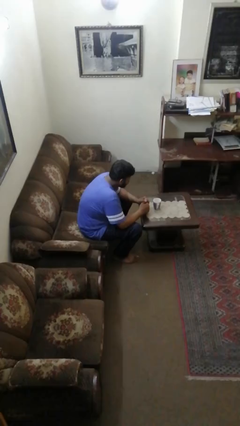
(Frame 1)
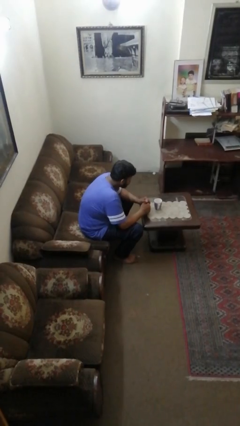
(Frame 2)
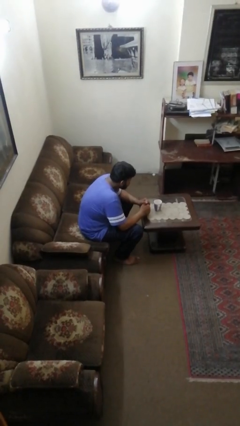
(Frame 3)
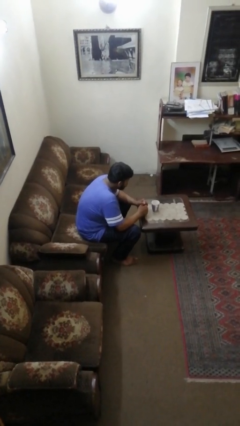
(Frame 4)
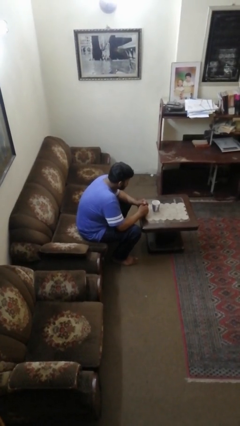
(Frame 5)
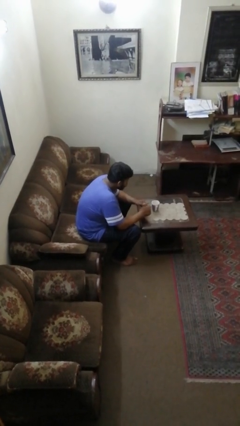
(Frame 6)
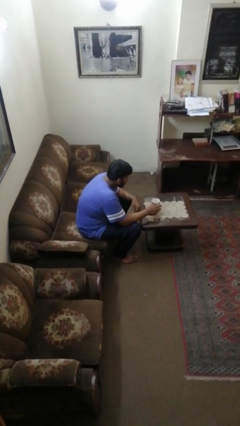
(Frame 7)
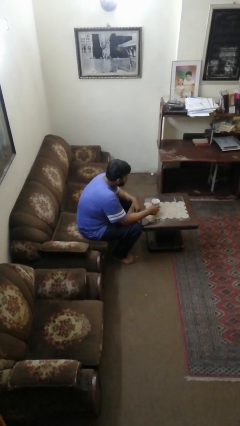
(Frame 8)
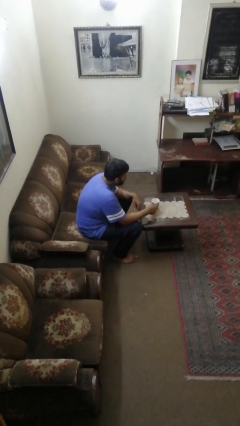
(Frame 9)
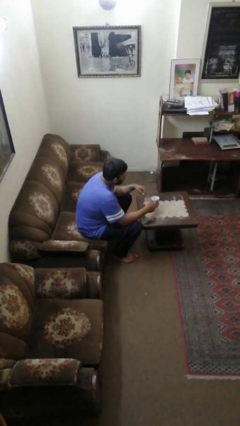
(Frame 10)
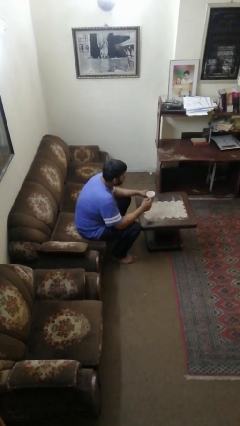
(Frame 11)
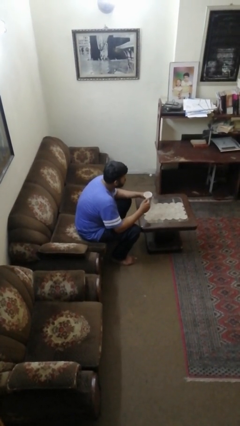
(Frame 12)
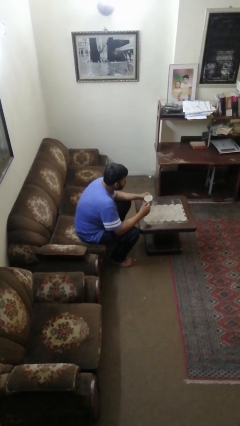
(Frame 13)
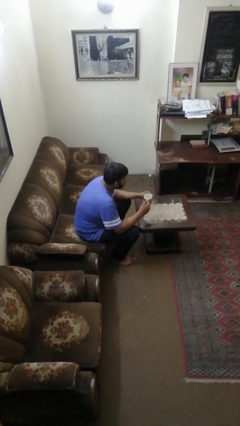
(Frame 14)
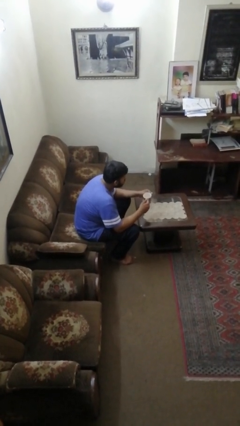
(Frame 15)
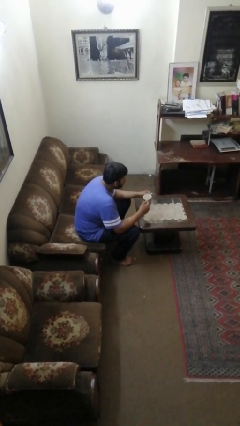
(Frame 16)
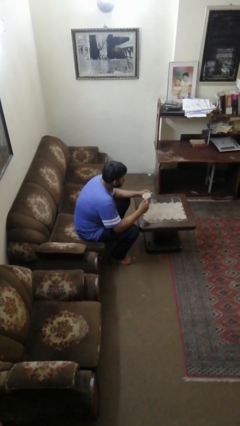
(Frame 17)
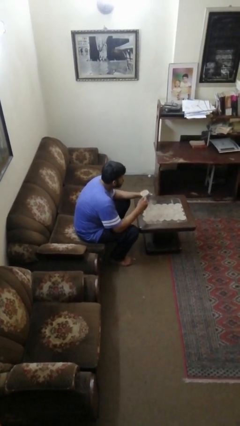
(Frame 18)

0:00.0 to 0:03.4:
person picks up object from table

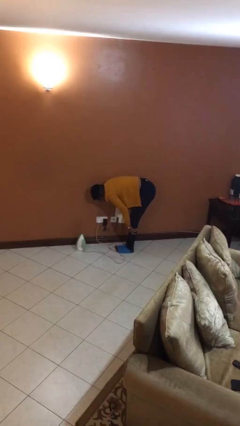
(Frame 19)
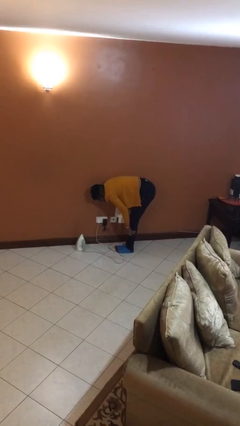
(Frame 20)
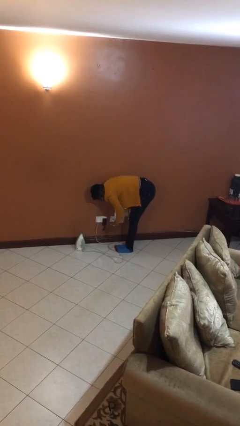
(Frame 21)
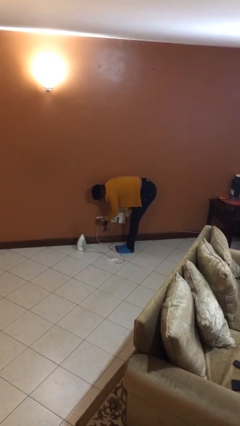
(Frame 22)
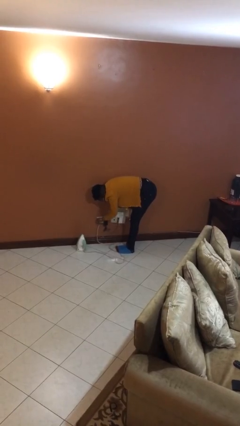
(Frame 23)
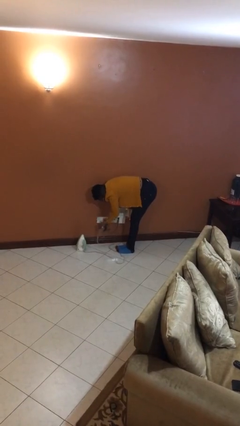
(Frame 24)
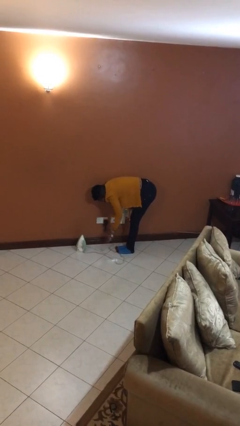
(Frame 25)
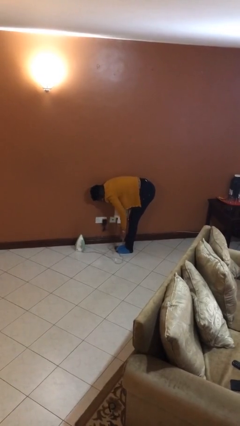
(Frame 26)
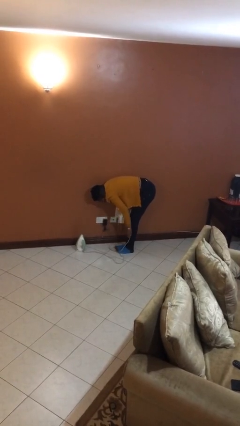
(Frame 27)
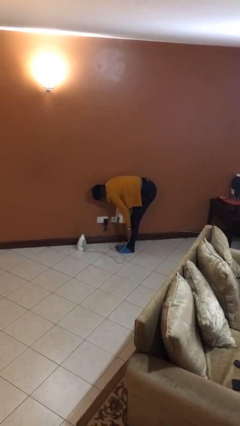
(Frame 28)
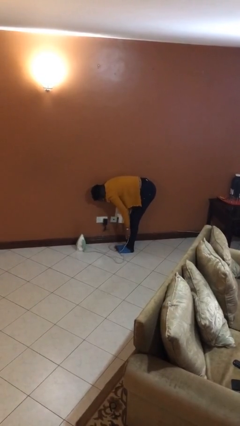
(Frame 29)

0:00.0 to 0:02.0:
person unplugs from electrical socket

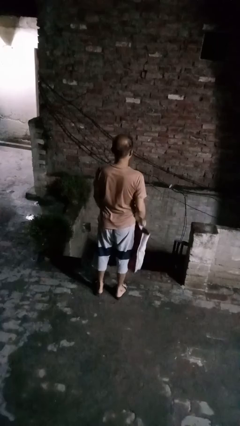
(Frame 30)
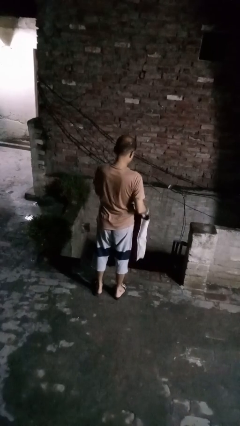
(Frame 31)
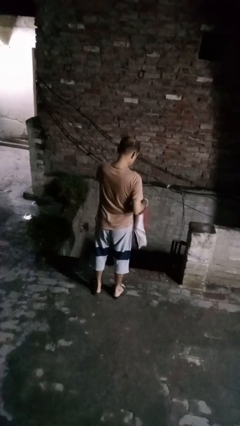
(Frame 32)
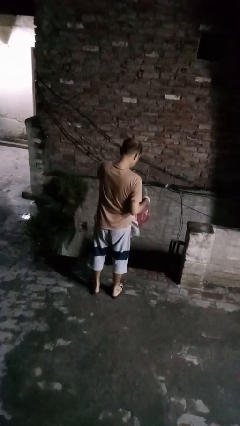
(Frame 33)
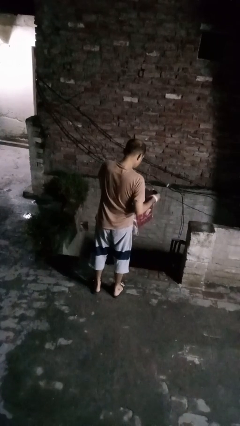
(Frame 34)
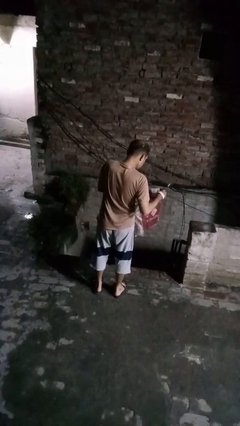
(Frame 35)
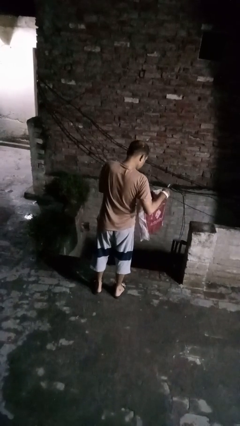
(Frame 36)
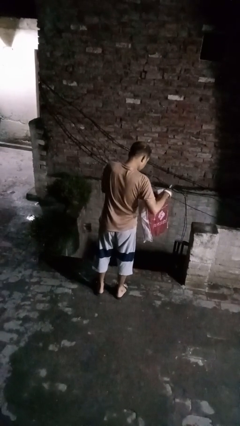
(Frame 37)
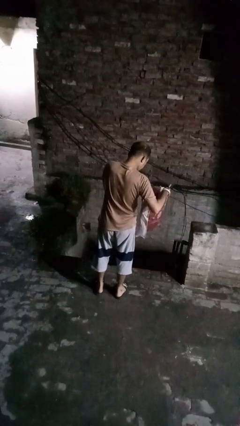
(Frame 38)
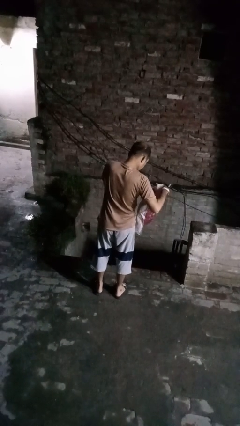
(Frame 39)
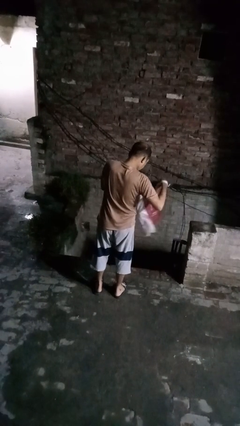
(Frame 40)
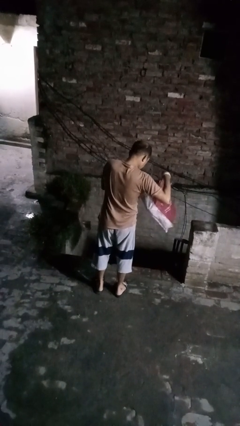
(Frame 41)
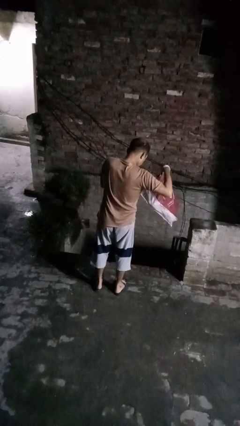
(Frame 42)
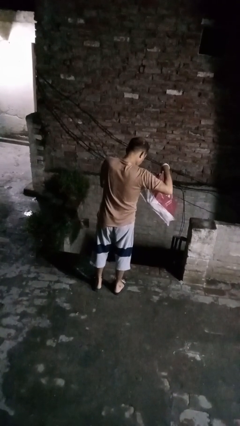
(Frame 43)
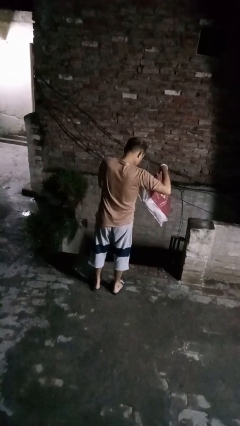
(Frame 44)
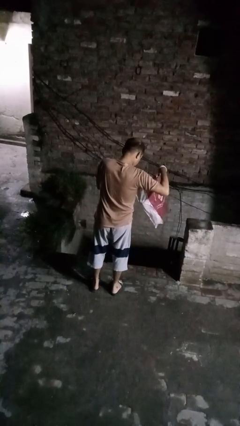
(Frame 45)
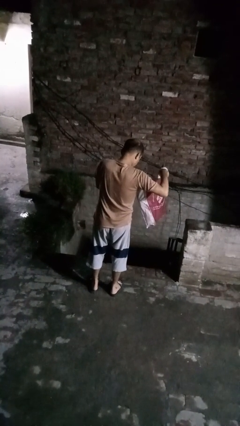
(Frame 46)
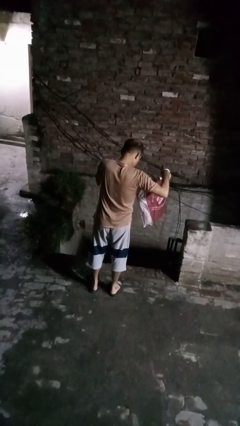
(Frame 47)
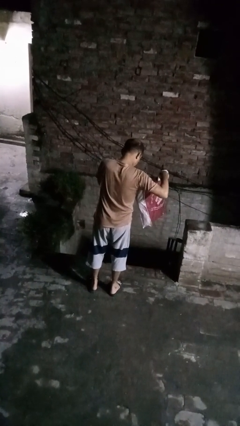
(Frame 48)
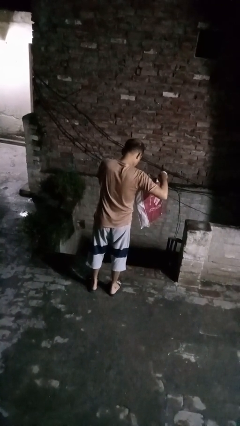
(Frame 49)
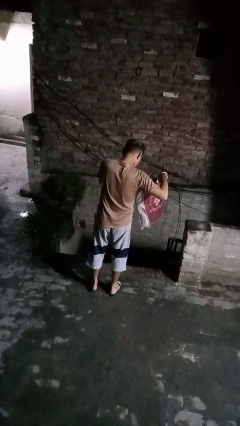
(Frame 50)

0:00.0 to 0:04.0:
person searches in bag

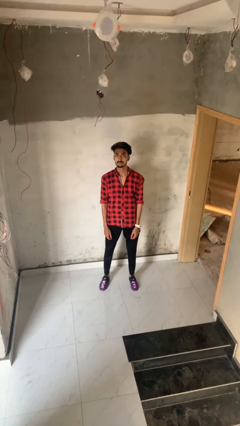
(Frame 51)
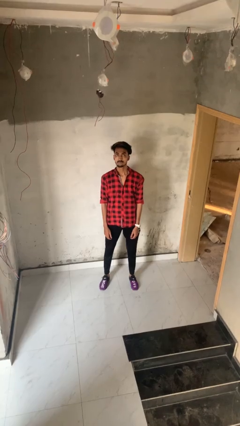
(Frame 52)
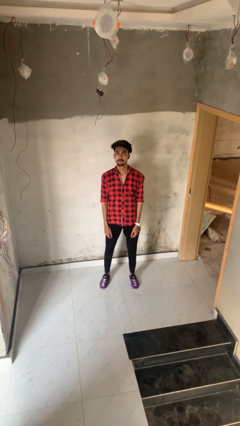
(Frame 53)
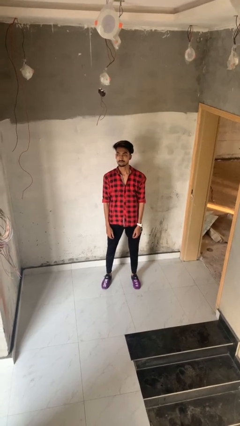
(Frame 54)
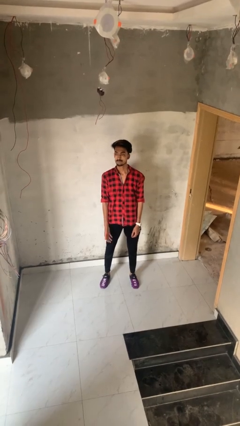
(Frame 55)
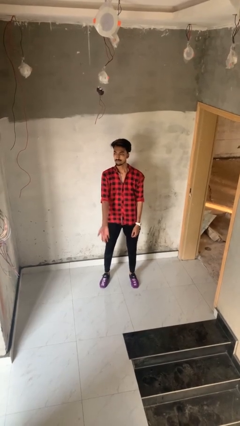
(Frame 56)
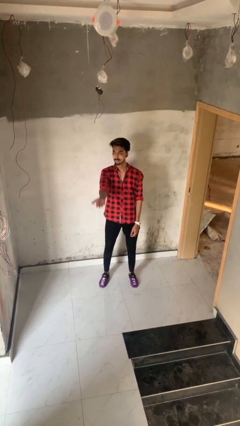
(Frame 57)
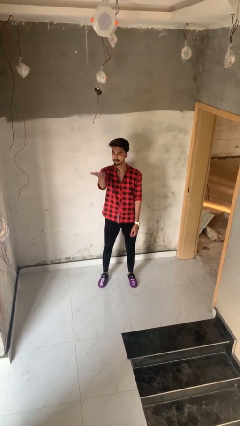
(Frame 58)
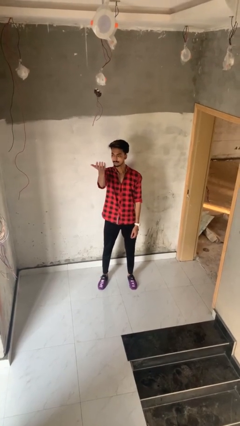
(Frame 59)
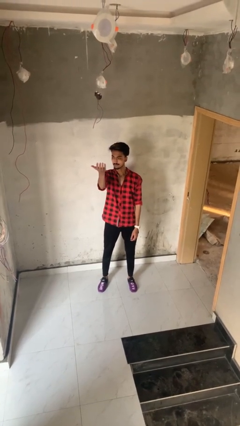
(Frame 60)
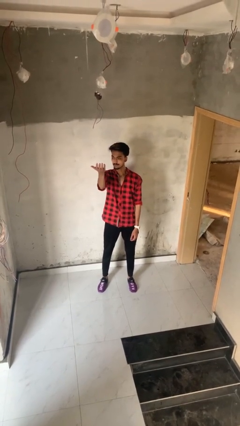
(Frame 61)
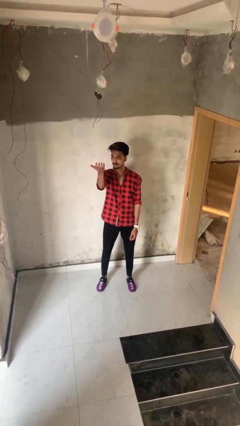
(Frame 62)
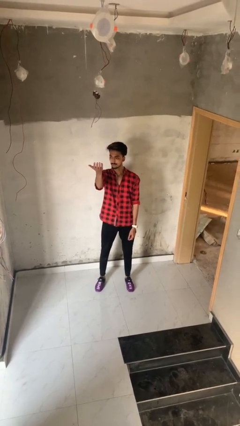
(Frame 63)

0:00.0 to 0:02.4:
person gestures swipe up

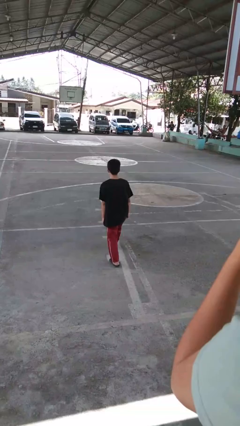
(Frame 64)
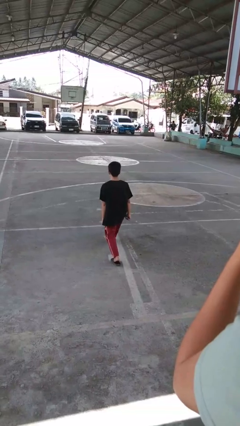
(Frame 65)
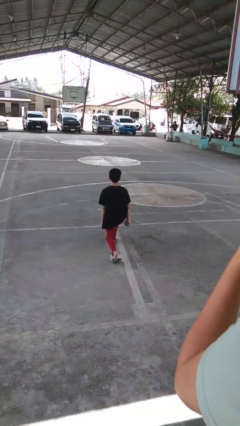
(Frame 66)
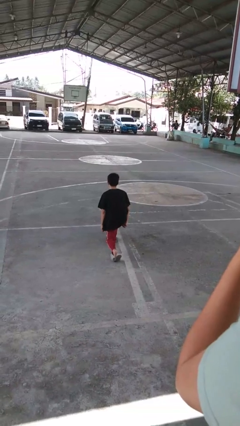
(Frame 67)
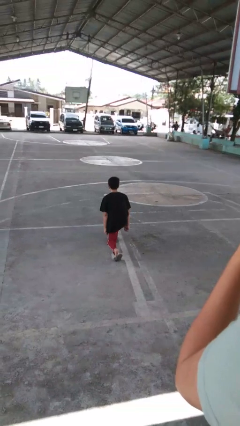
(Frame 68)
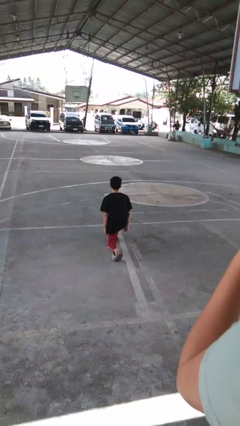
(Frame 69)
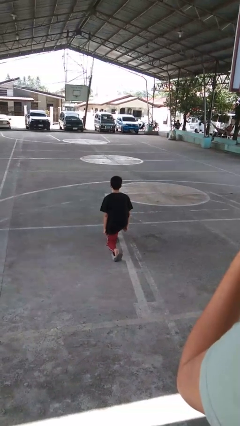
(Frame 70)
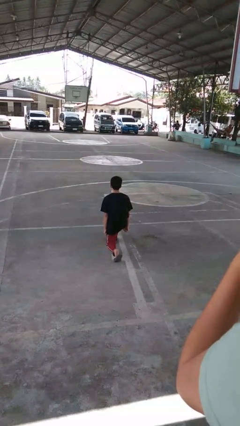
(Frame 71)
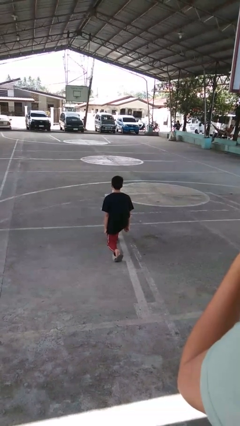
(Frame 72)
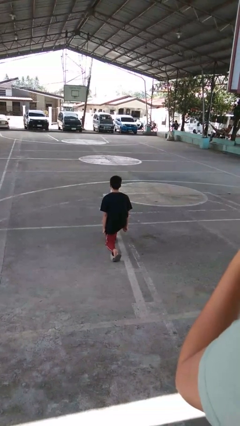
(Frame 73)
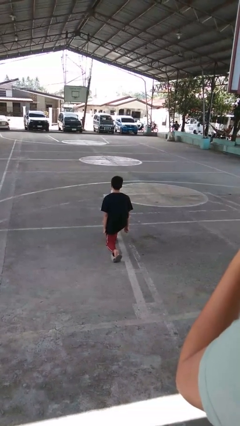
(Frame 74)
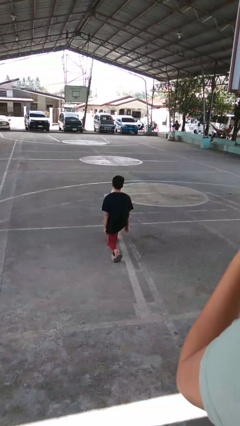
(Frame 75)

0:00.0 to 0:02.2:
person exercises with lunges

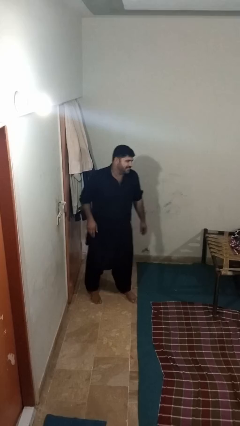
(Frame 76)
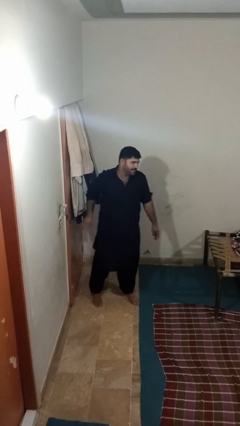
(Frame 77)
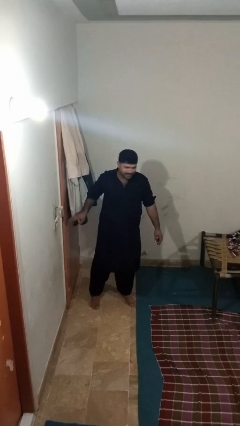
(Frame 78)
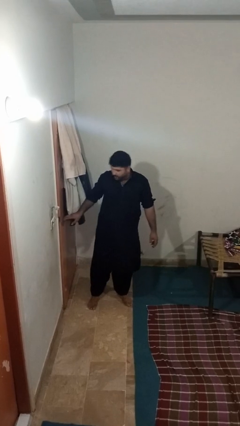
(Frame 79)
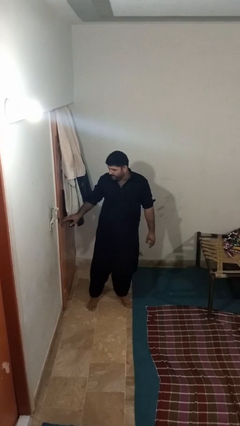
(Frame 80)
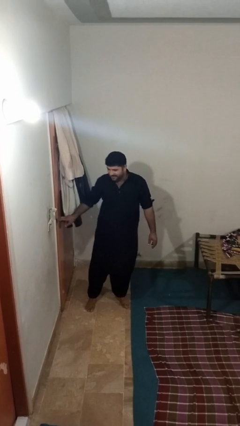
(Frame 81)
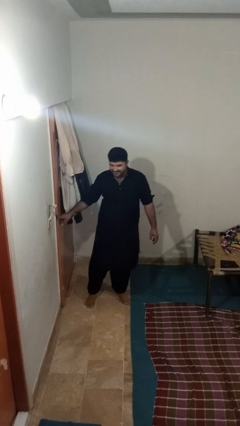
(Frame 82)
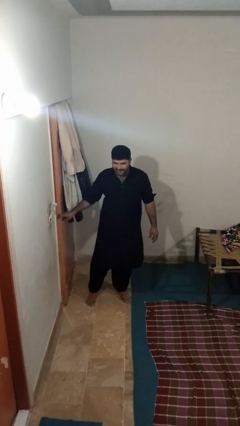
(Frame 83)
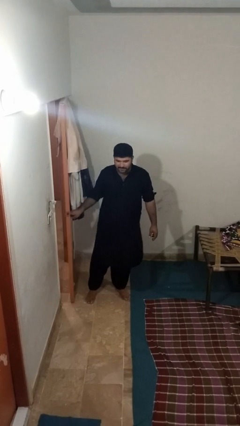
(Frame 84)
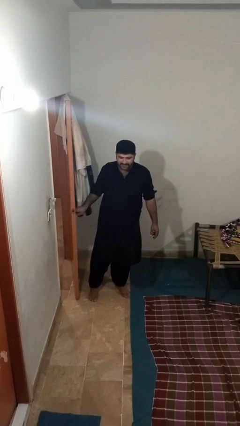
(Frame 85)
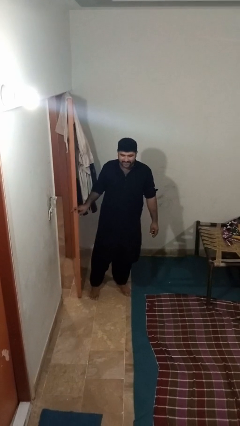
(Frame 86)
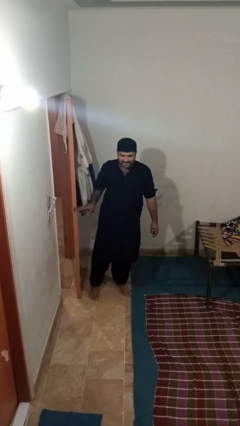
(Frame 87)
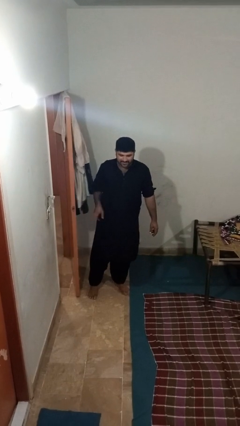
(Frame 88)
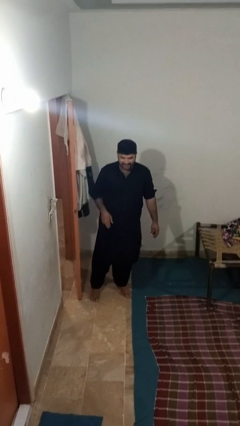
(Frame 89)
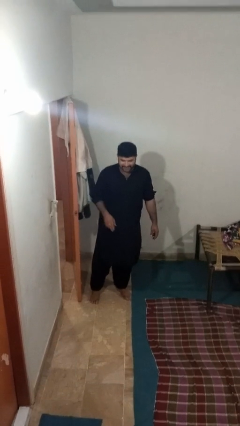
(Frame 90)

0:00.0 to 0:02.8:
person opens facility door

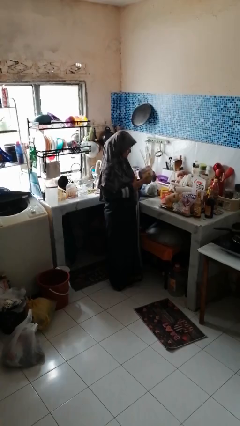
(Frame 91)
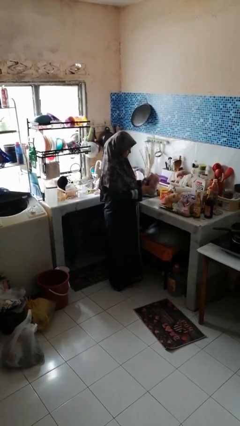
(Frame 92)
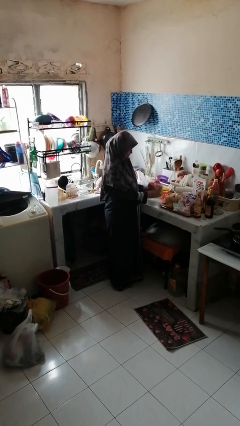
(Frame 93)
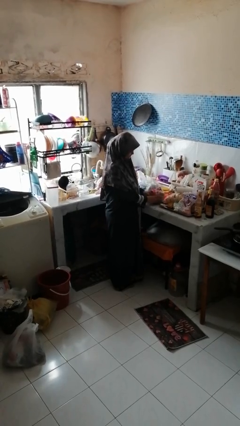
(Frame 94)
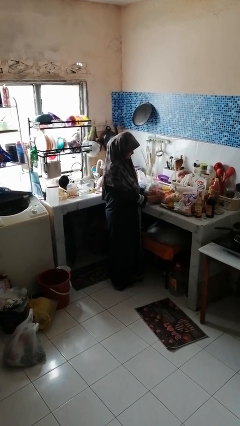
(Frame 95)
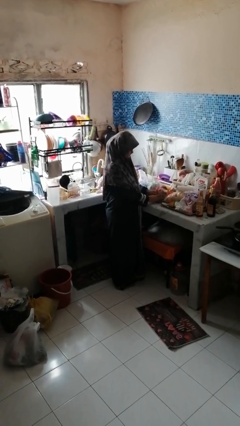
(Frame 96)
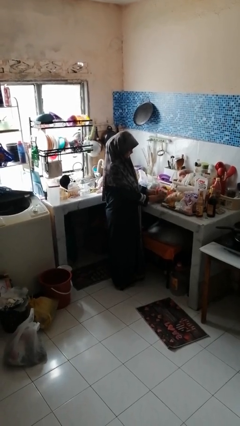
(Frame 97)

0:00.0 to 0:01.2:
person puts down object on countertop
